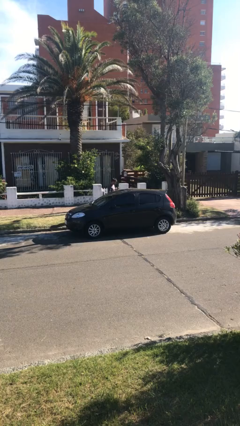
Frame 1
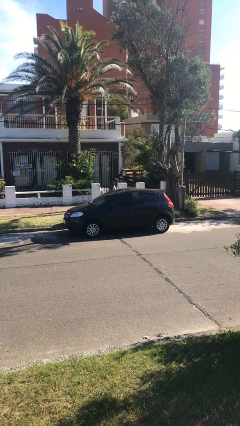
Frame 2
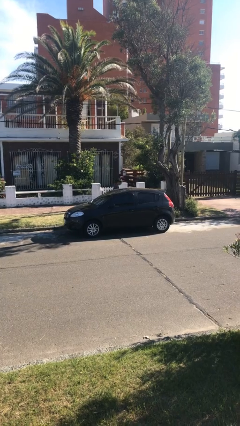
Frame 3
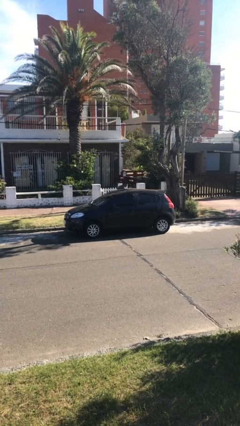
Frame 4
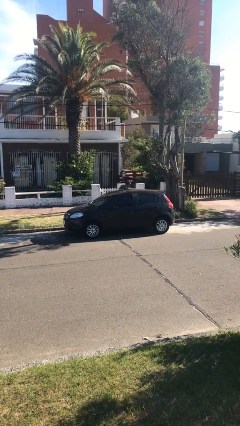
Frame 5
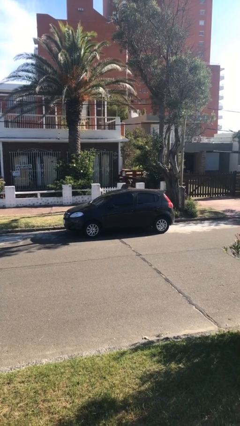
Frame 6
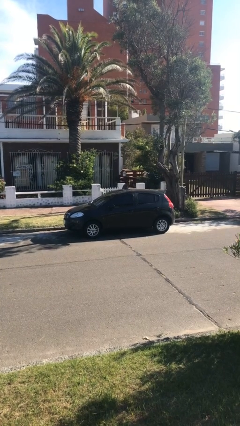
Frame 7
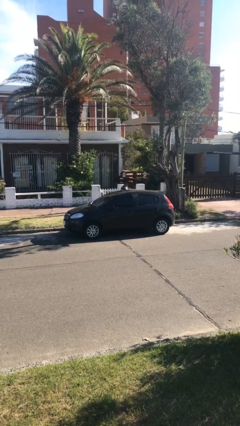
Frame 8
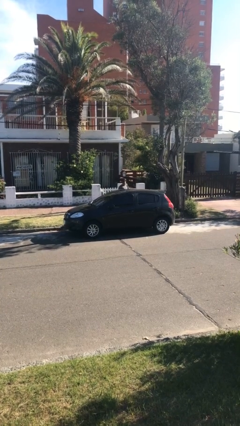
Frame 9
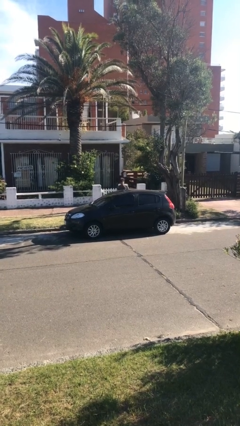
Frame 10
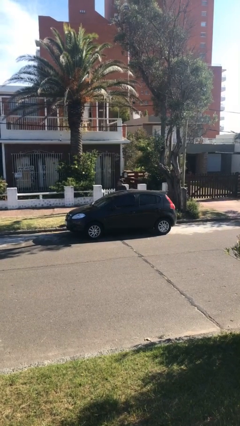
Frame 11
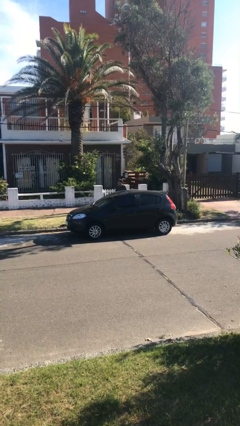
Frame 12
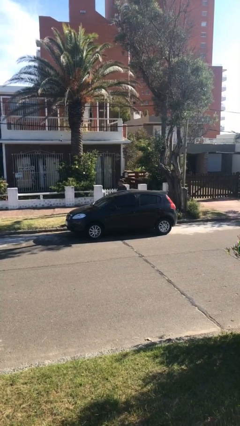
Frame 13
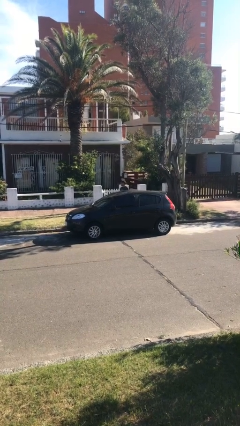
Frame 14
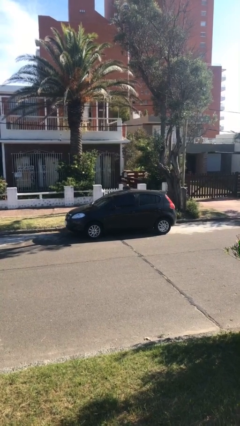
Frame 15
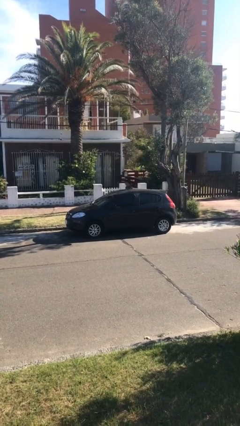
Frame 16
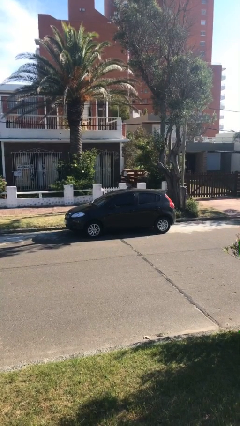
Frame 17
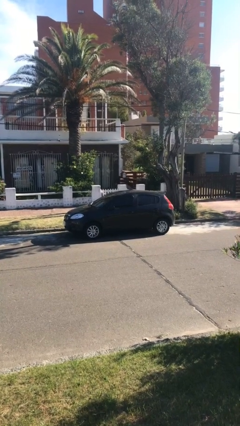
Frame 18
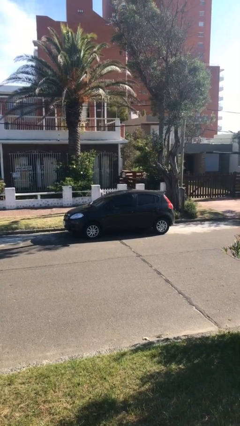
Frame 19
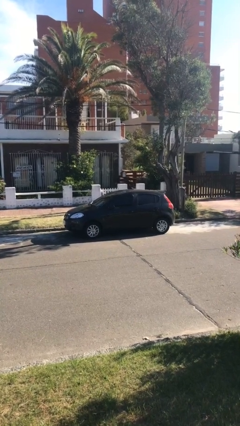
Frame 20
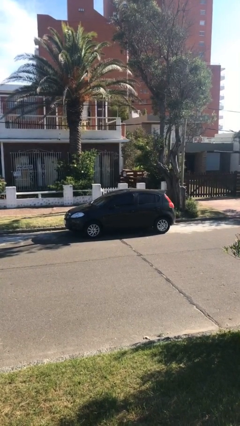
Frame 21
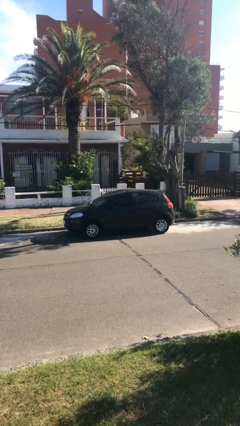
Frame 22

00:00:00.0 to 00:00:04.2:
car picks up person

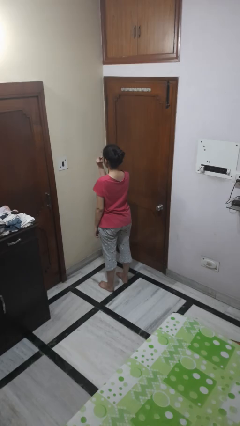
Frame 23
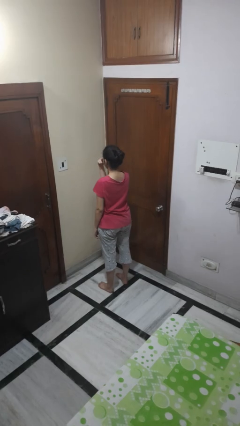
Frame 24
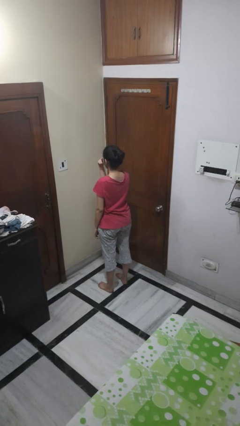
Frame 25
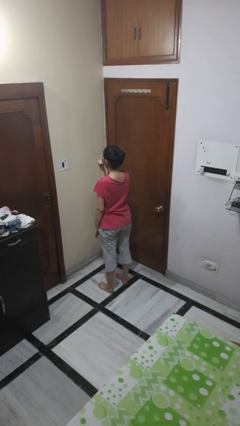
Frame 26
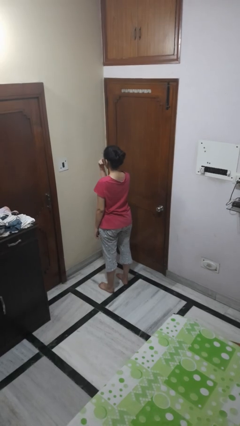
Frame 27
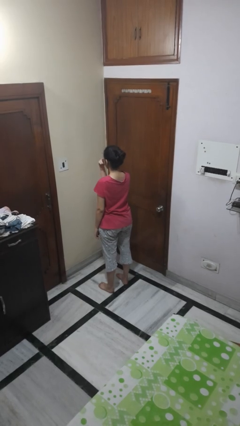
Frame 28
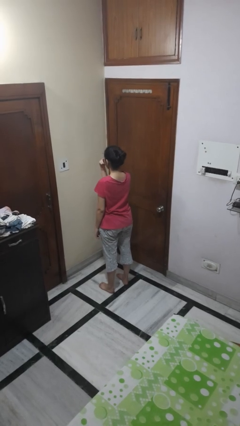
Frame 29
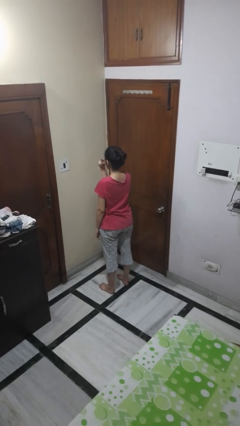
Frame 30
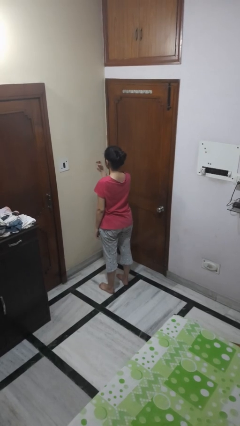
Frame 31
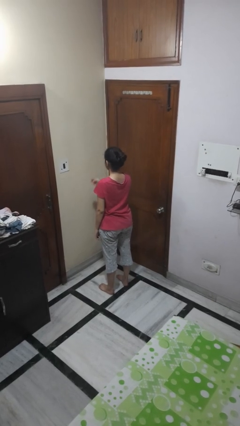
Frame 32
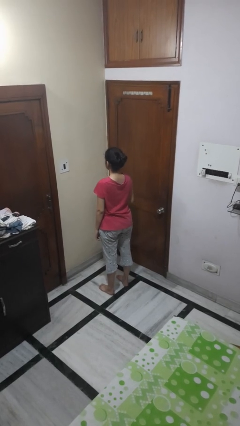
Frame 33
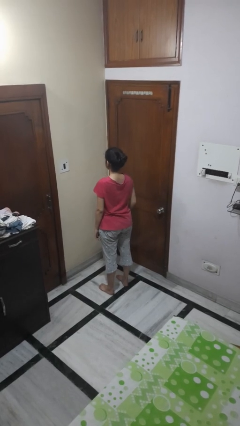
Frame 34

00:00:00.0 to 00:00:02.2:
person gestures watch closely

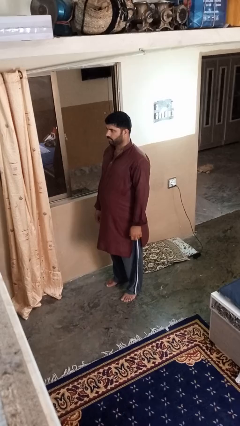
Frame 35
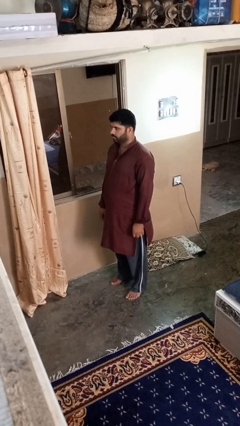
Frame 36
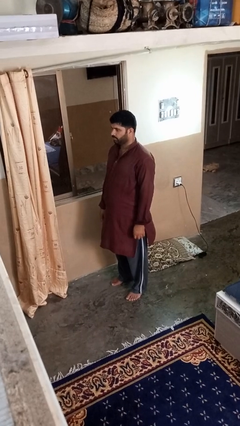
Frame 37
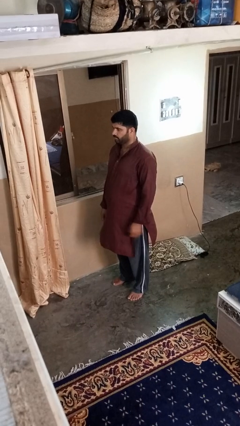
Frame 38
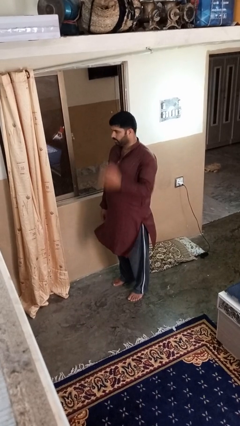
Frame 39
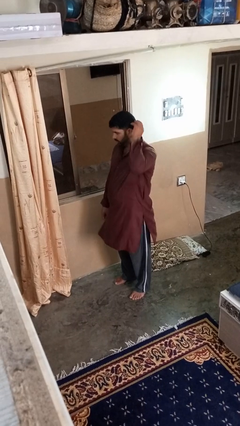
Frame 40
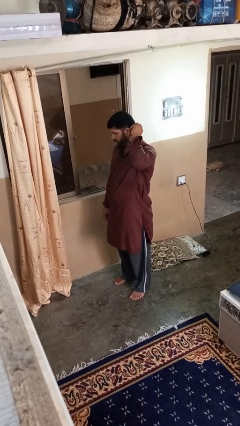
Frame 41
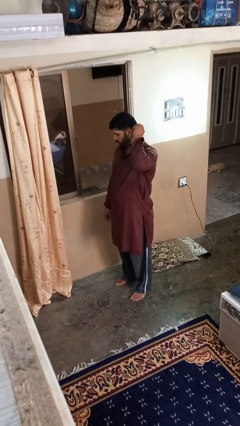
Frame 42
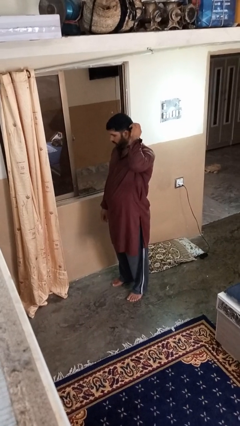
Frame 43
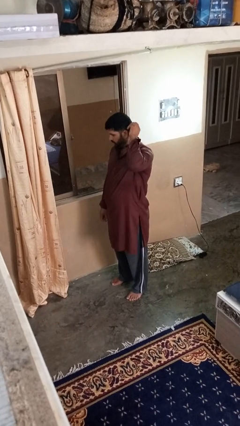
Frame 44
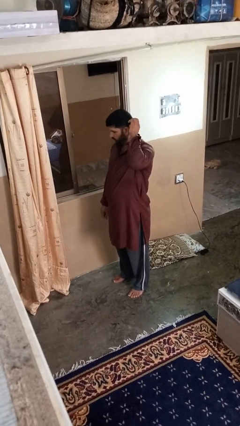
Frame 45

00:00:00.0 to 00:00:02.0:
person strokes hair

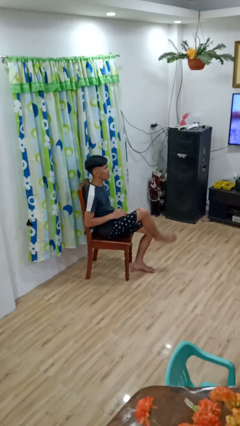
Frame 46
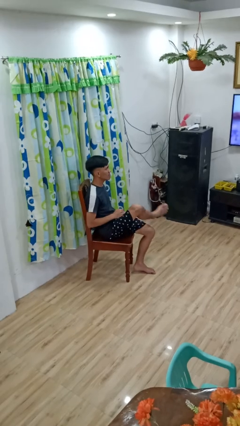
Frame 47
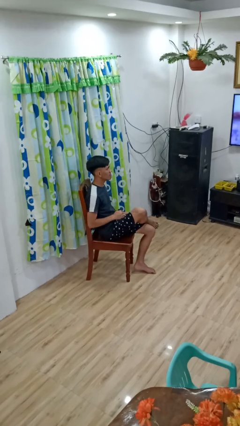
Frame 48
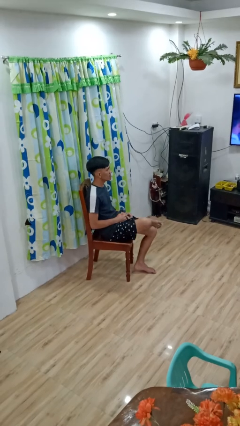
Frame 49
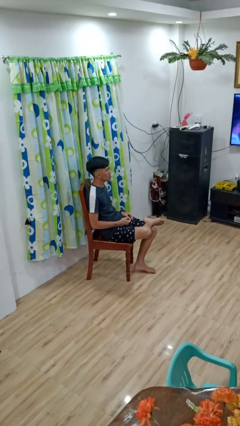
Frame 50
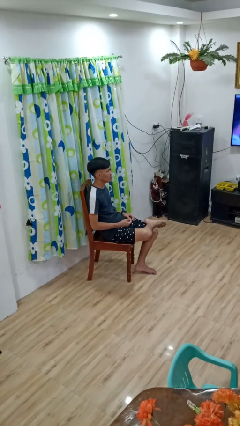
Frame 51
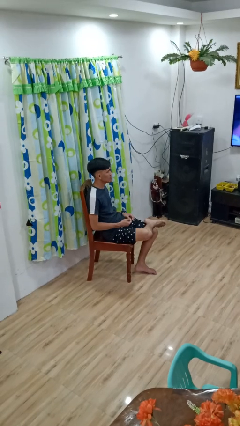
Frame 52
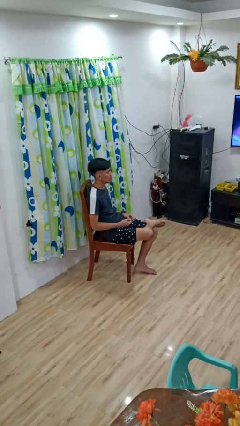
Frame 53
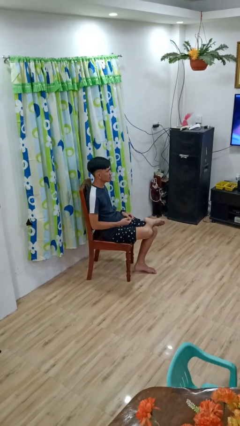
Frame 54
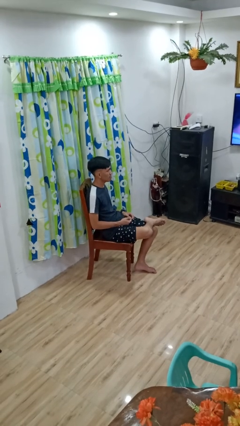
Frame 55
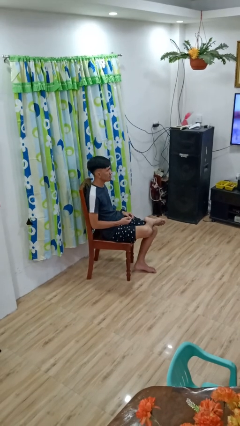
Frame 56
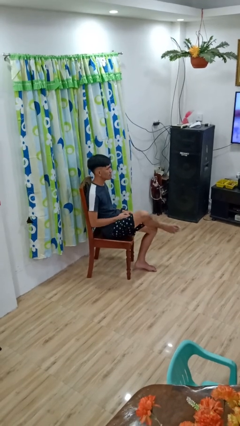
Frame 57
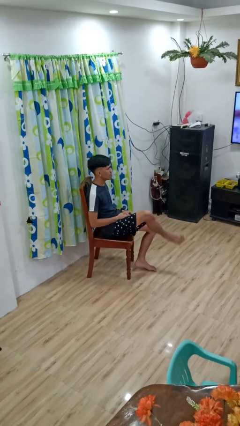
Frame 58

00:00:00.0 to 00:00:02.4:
person crosses legs

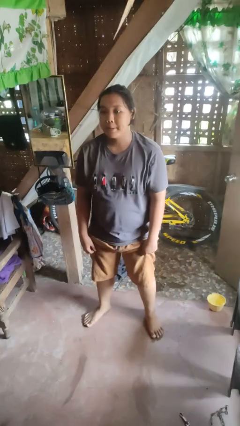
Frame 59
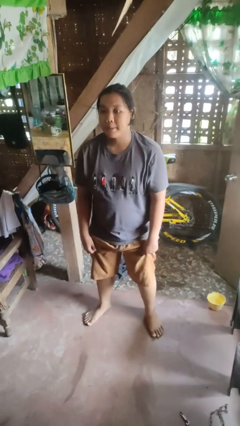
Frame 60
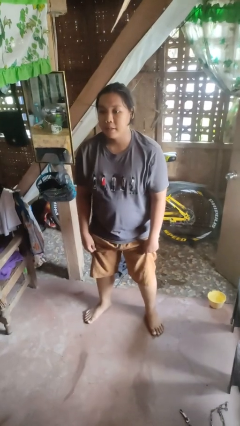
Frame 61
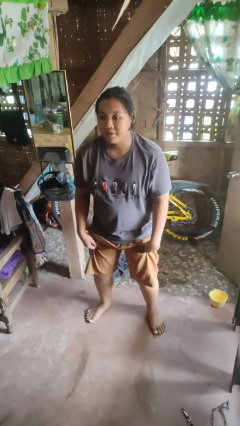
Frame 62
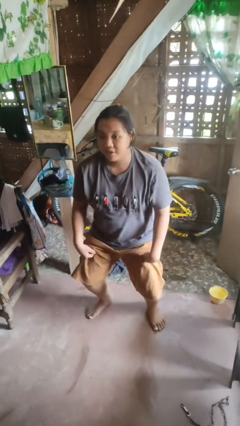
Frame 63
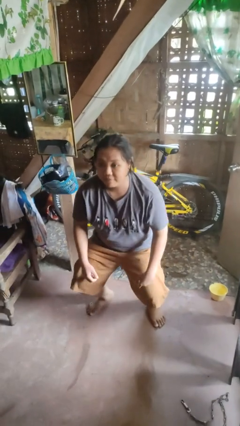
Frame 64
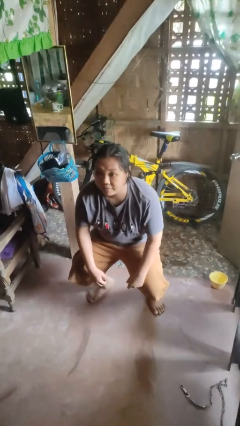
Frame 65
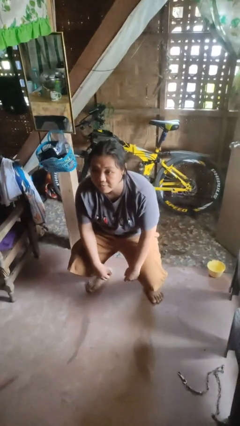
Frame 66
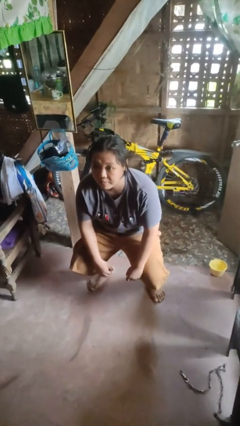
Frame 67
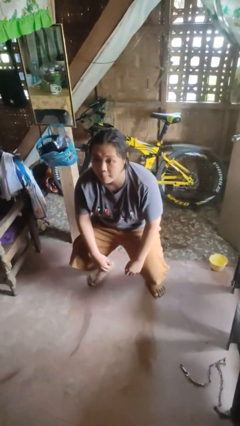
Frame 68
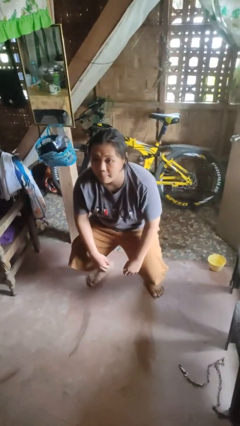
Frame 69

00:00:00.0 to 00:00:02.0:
person squats

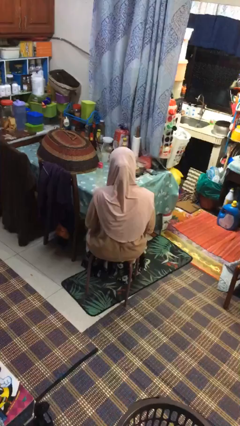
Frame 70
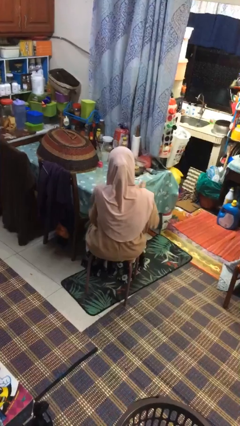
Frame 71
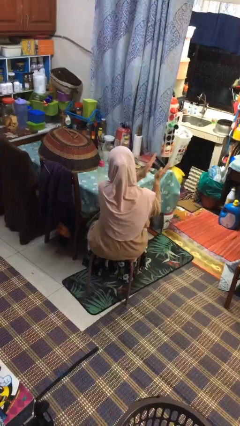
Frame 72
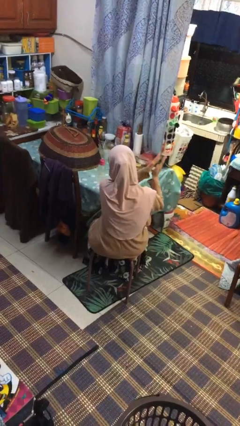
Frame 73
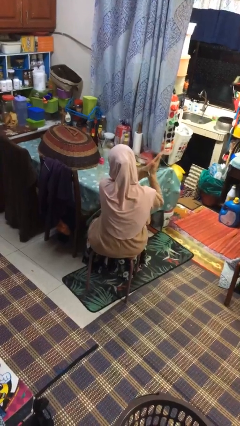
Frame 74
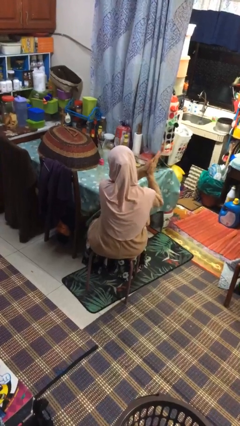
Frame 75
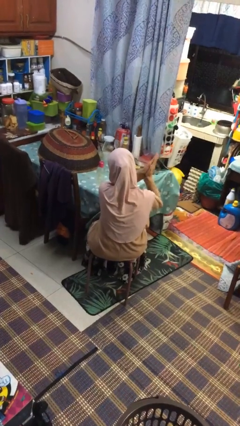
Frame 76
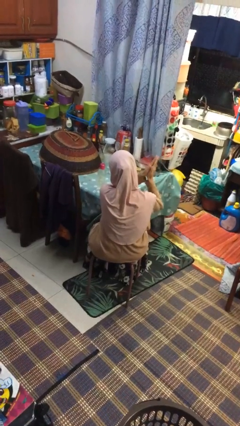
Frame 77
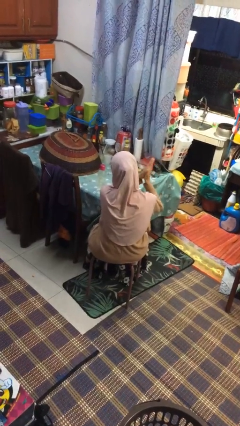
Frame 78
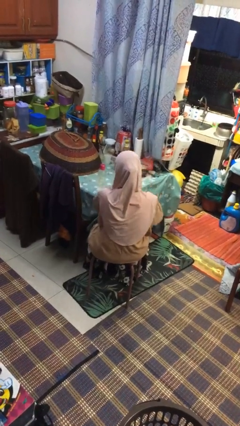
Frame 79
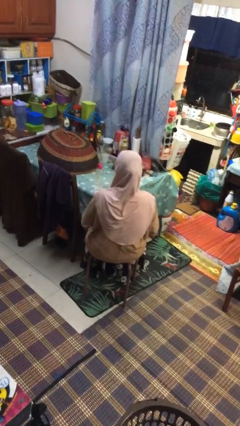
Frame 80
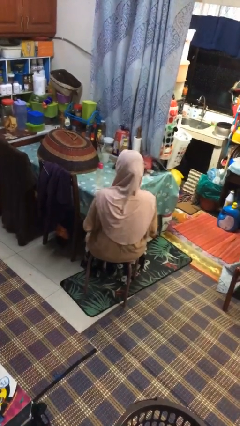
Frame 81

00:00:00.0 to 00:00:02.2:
person claps hands

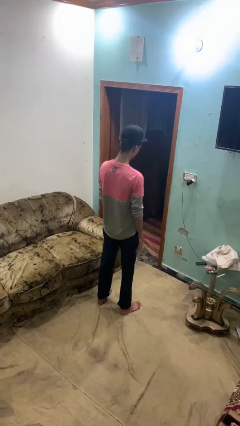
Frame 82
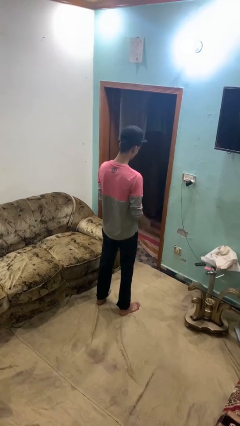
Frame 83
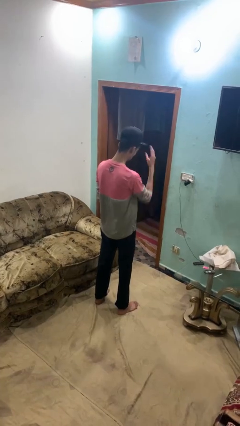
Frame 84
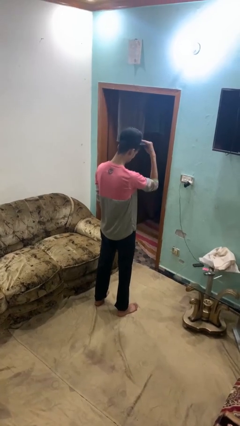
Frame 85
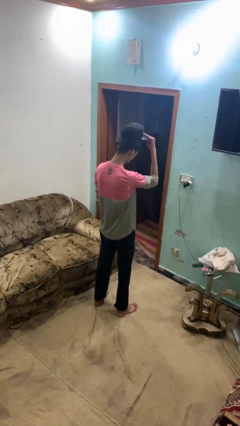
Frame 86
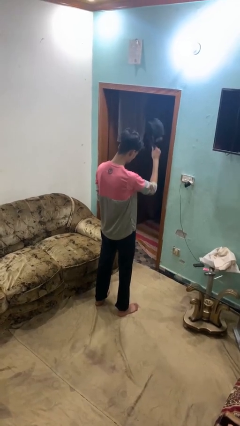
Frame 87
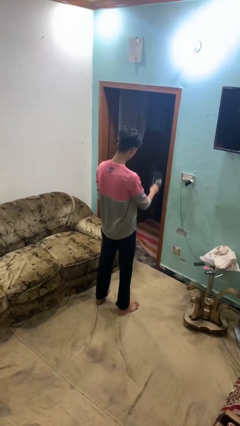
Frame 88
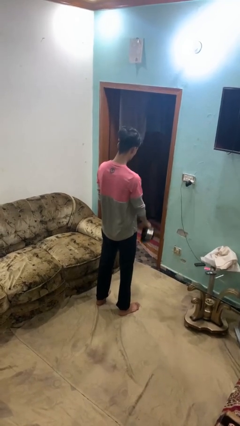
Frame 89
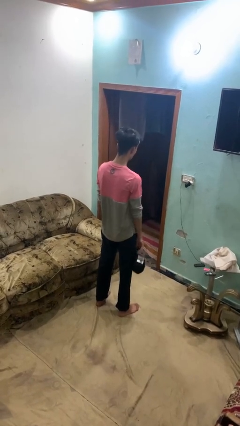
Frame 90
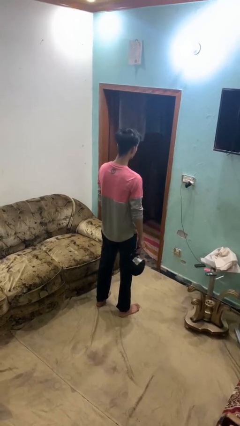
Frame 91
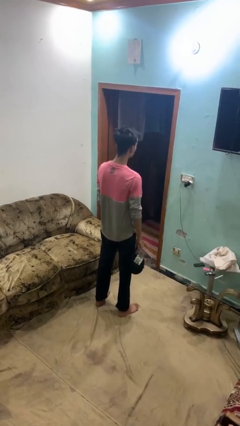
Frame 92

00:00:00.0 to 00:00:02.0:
person takes off hat

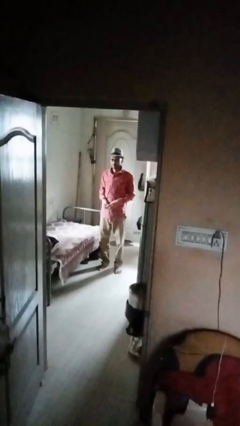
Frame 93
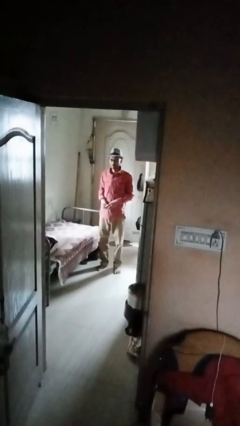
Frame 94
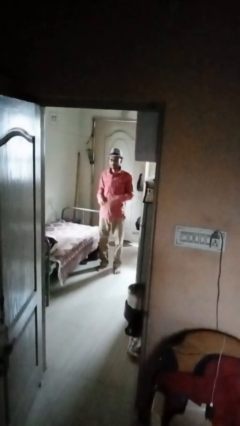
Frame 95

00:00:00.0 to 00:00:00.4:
person takes off glasses
